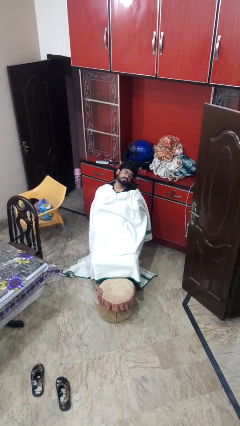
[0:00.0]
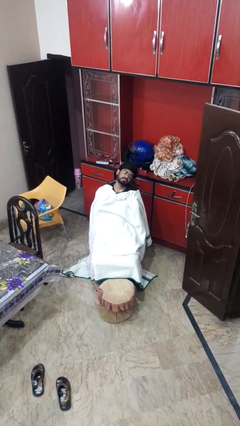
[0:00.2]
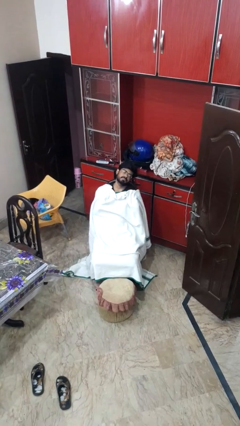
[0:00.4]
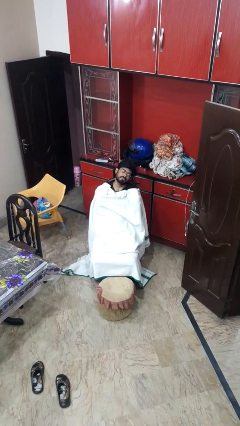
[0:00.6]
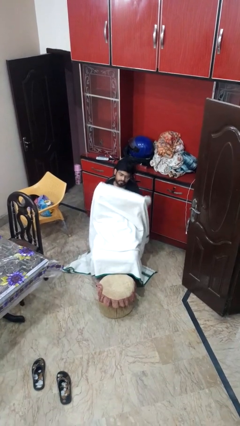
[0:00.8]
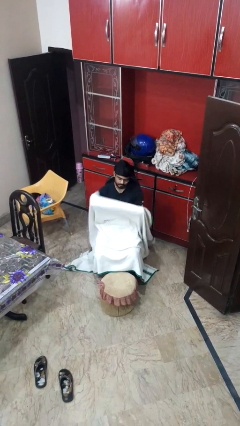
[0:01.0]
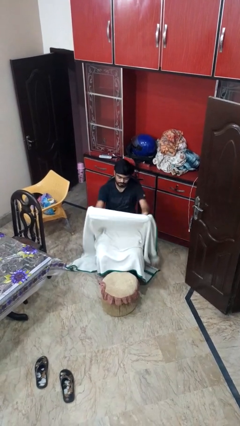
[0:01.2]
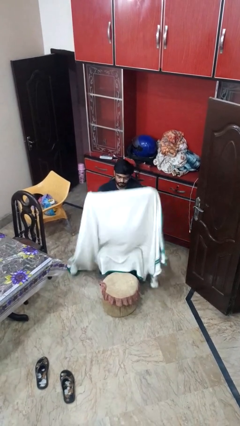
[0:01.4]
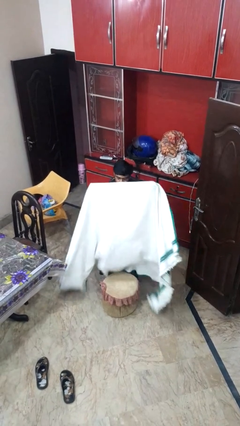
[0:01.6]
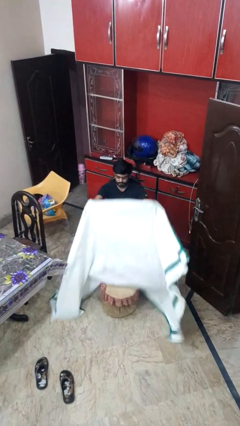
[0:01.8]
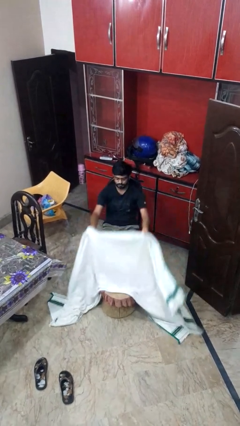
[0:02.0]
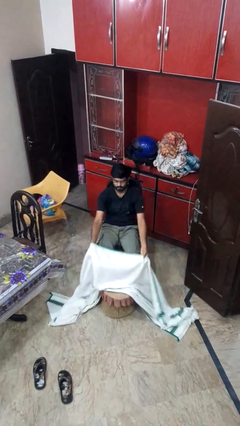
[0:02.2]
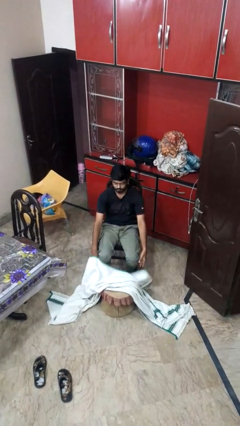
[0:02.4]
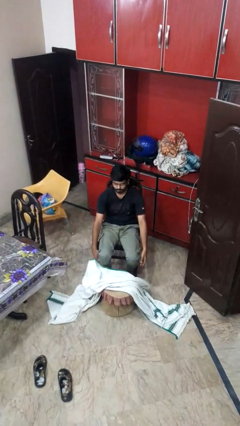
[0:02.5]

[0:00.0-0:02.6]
person uncovers with blanket

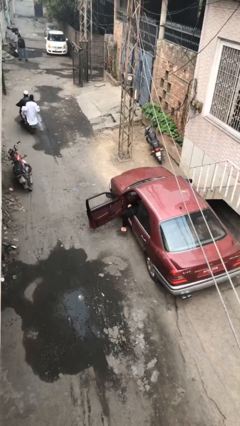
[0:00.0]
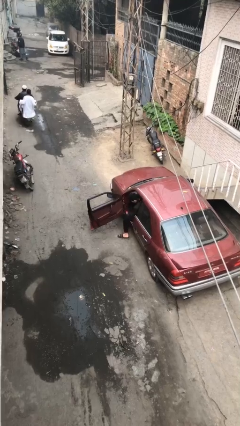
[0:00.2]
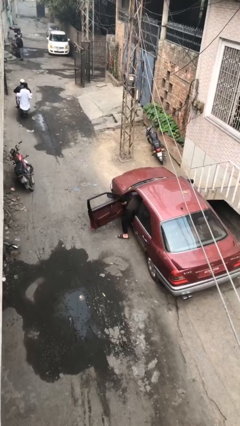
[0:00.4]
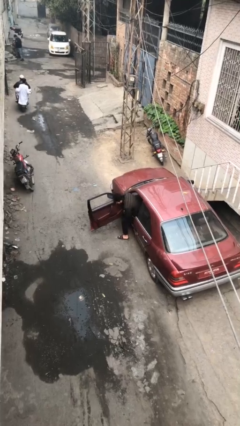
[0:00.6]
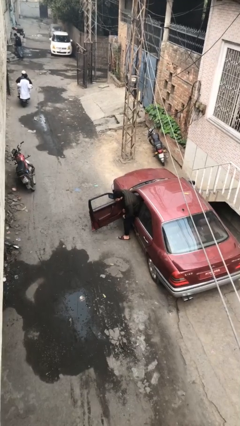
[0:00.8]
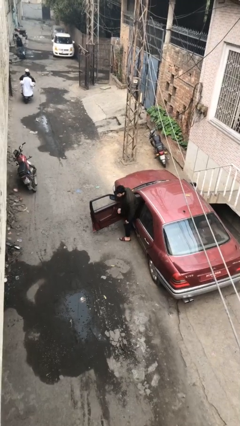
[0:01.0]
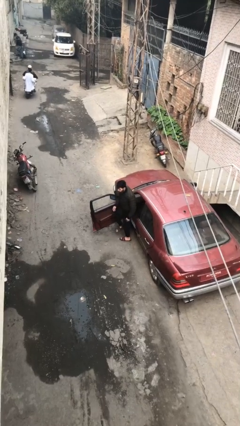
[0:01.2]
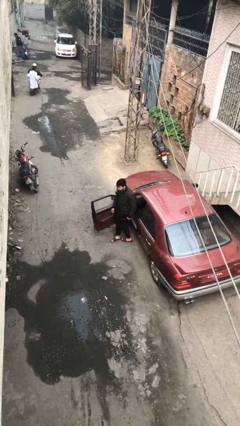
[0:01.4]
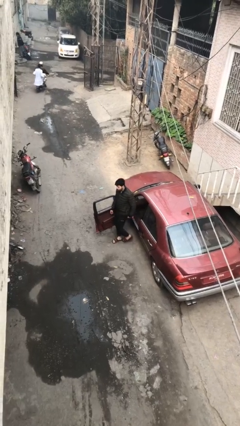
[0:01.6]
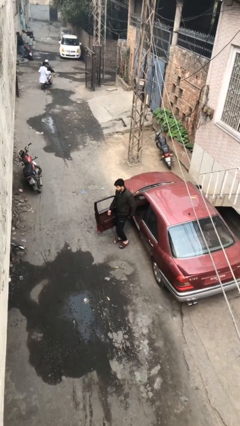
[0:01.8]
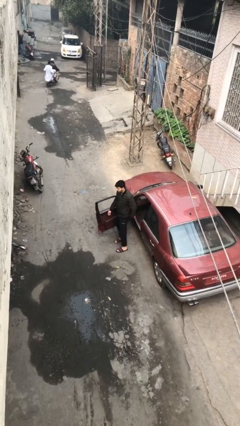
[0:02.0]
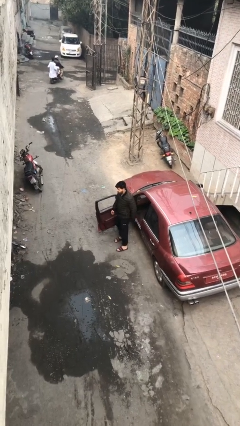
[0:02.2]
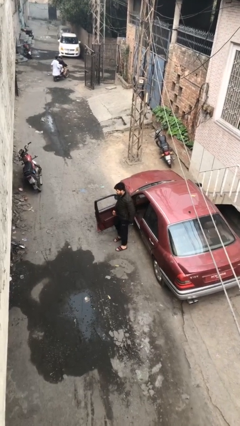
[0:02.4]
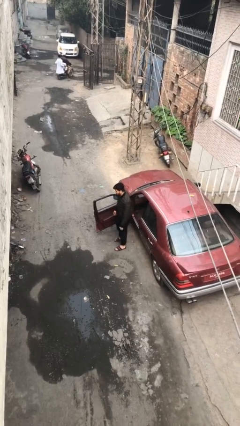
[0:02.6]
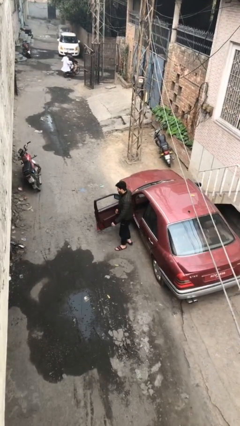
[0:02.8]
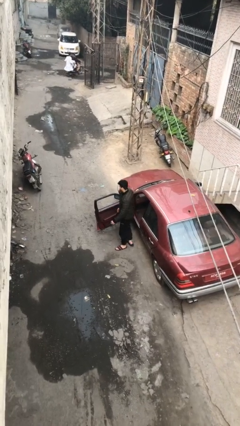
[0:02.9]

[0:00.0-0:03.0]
person exits car

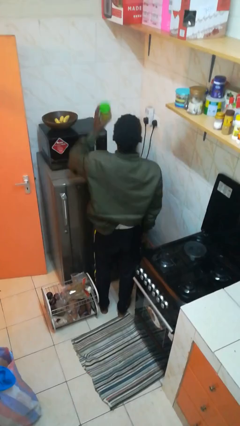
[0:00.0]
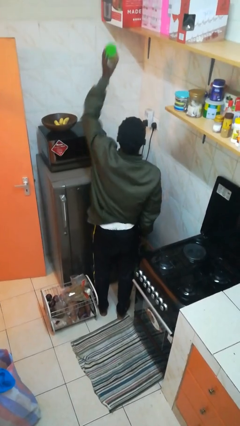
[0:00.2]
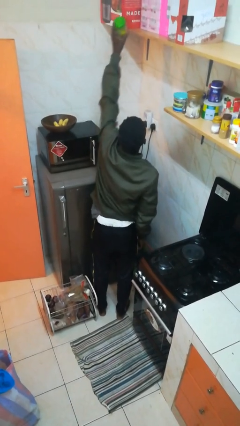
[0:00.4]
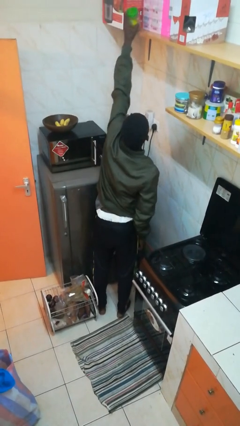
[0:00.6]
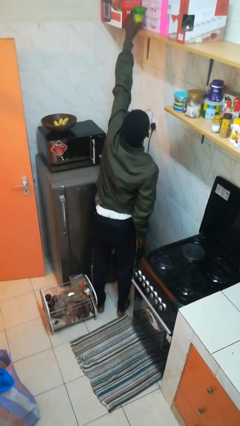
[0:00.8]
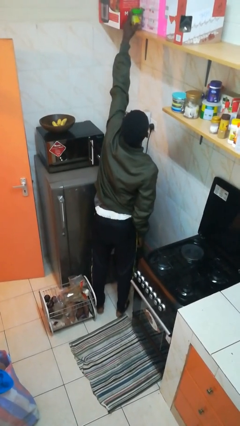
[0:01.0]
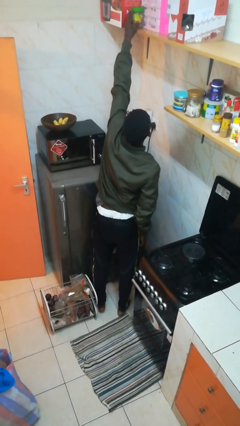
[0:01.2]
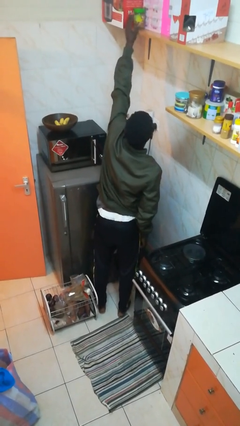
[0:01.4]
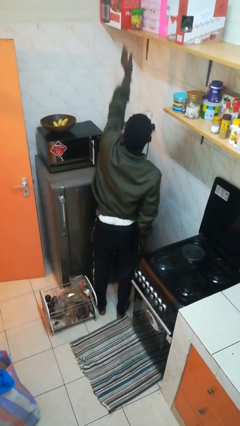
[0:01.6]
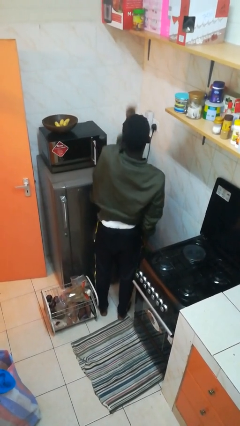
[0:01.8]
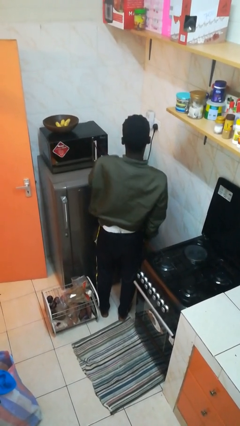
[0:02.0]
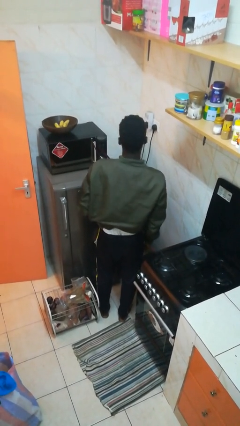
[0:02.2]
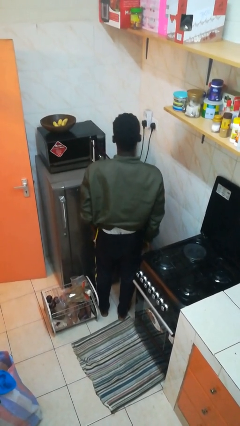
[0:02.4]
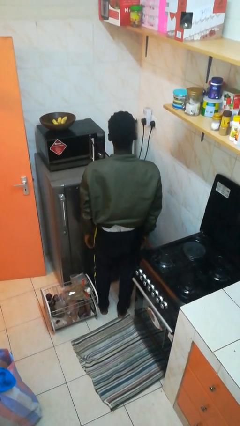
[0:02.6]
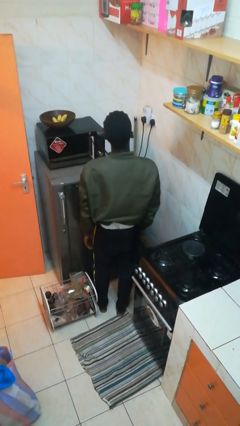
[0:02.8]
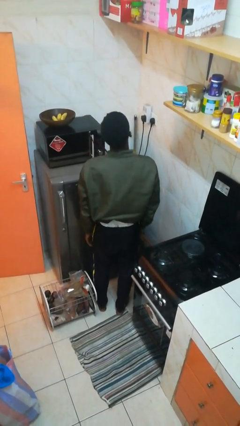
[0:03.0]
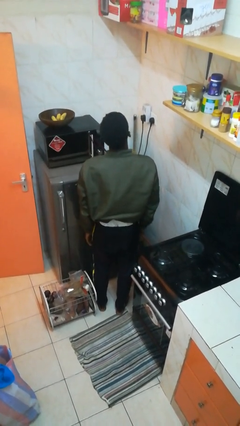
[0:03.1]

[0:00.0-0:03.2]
person puts down object on shelf

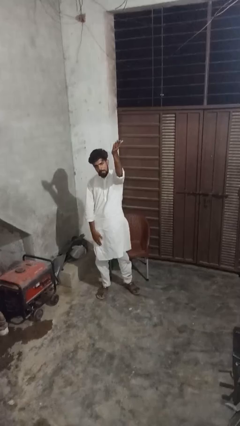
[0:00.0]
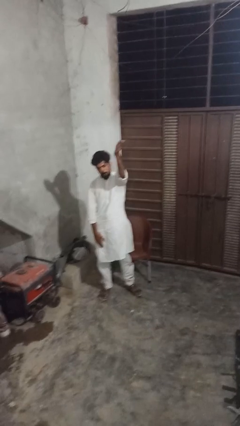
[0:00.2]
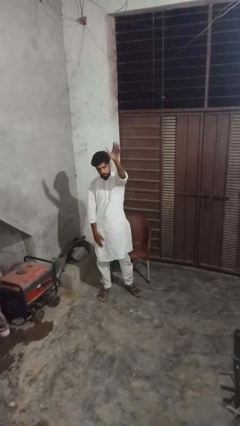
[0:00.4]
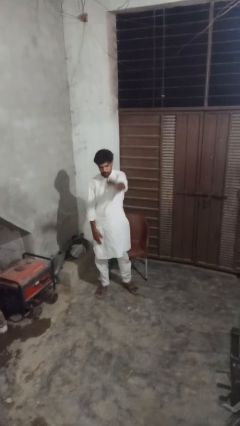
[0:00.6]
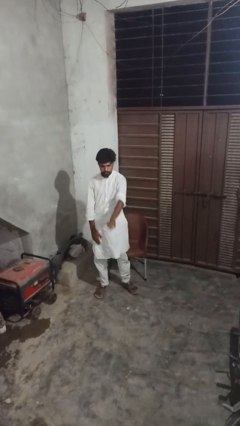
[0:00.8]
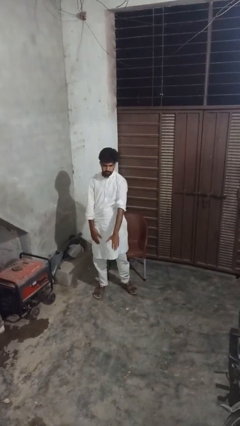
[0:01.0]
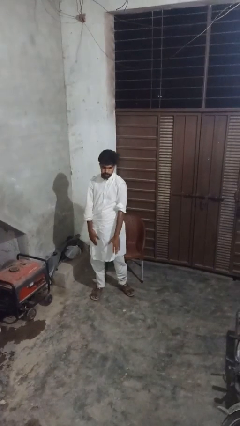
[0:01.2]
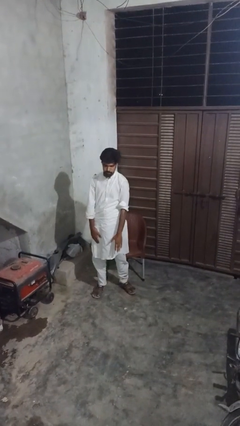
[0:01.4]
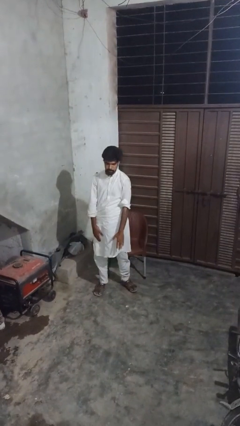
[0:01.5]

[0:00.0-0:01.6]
person gestures swipe down

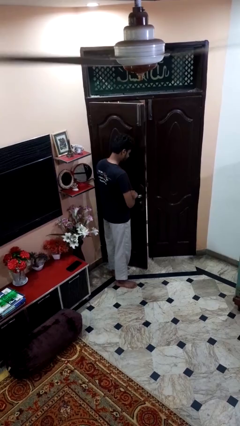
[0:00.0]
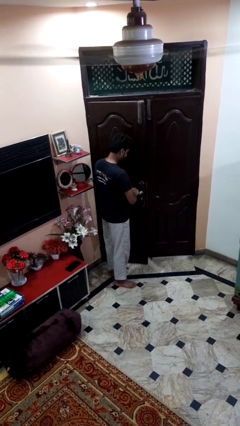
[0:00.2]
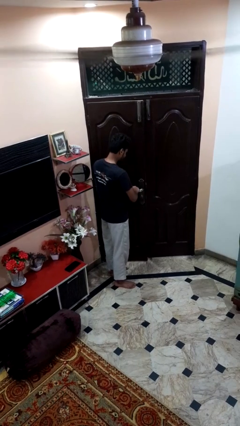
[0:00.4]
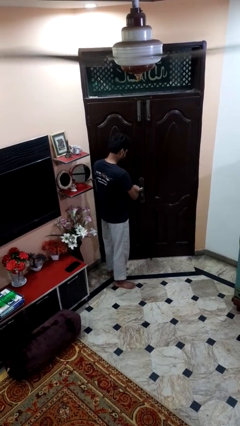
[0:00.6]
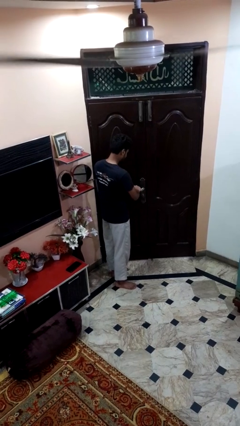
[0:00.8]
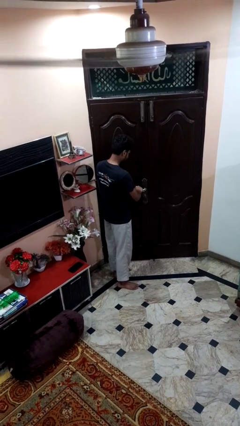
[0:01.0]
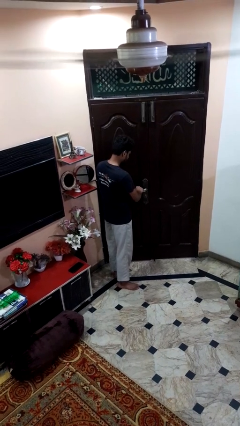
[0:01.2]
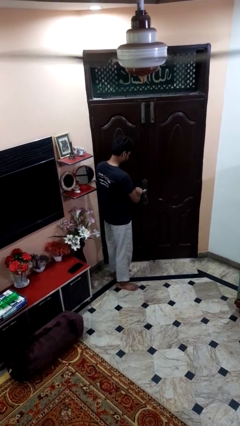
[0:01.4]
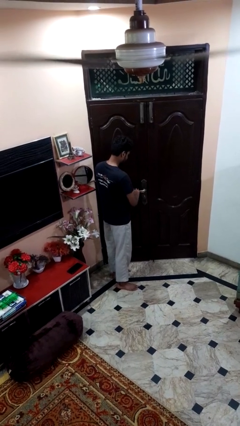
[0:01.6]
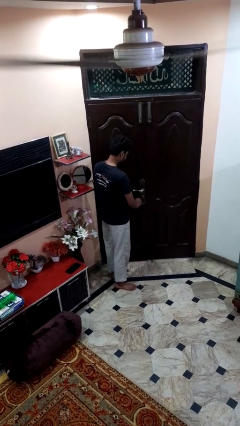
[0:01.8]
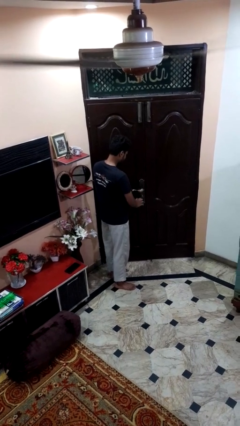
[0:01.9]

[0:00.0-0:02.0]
person closes facility door

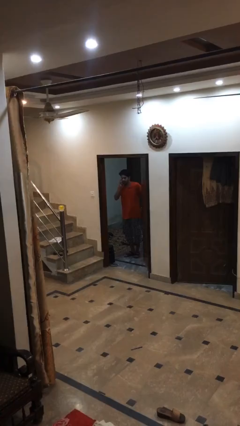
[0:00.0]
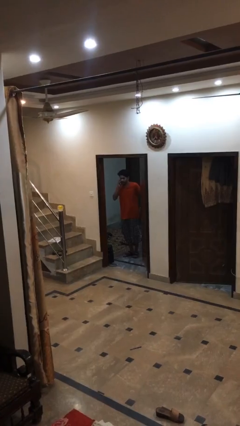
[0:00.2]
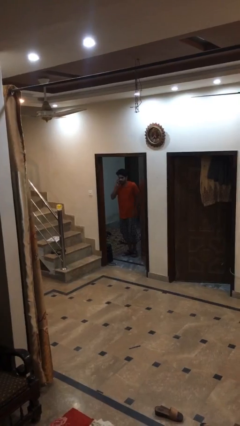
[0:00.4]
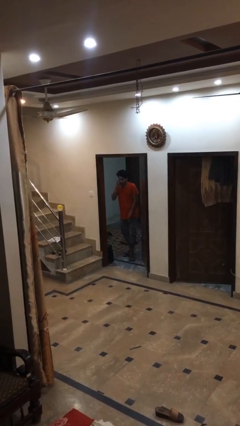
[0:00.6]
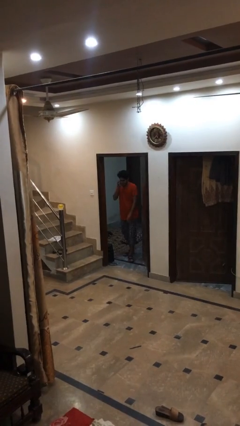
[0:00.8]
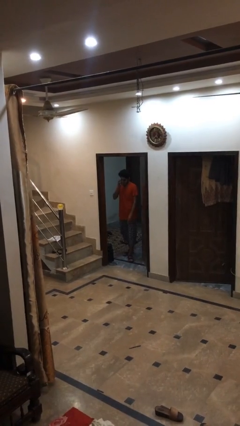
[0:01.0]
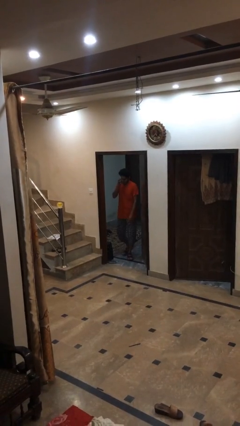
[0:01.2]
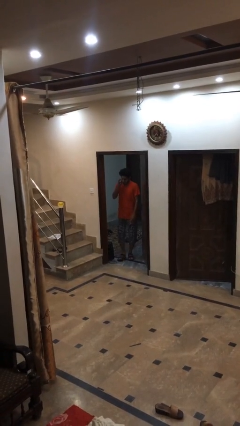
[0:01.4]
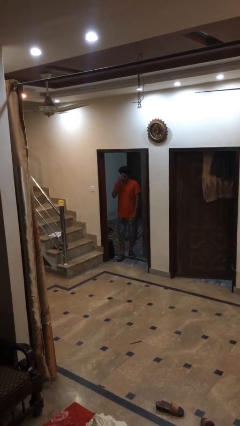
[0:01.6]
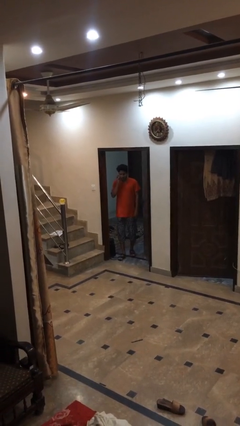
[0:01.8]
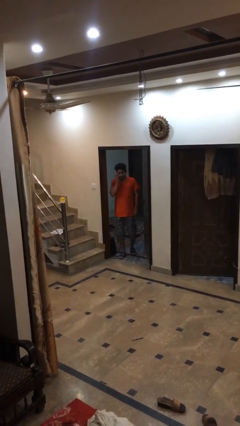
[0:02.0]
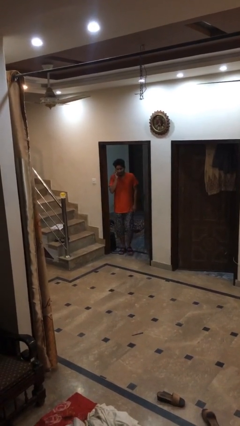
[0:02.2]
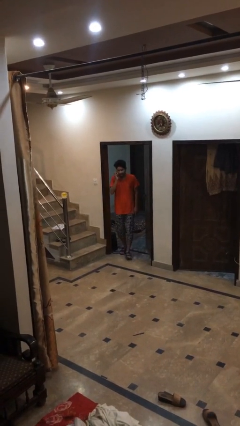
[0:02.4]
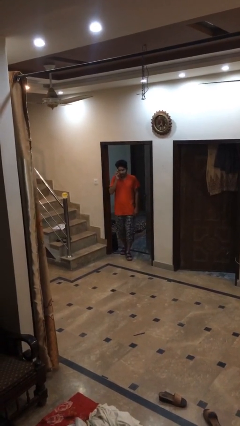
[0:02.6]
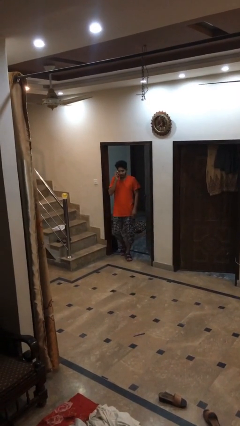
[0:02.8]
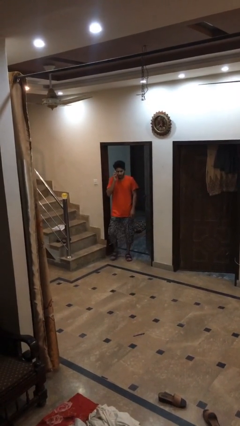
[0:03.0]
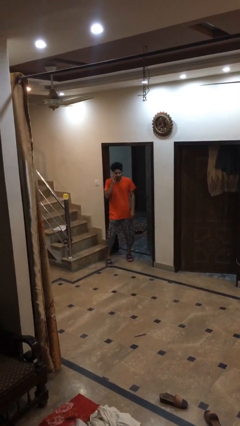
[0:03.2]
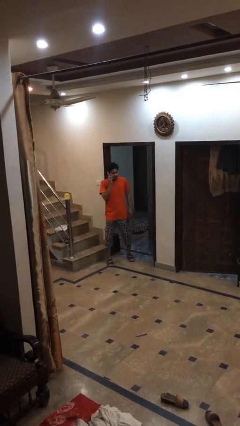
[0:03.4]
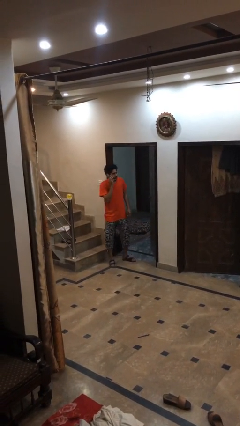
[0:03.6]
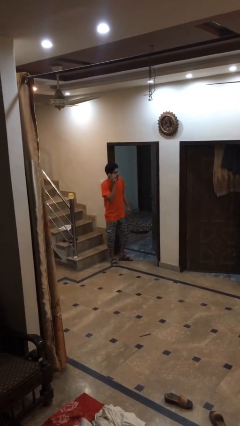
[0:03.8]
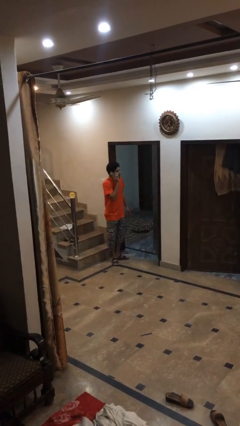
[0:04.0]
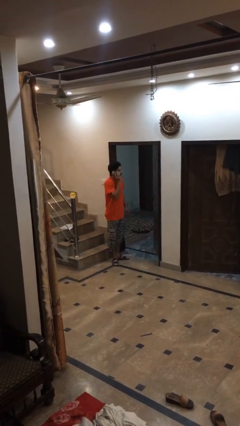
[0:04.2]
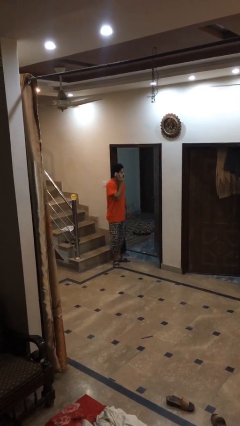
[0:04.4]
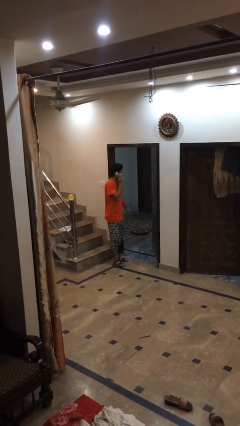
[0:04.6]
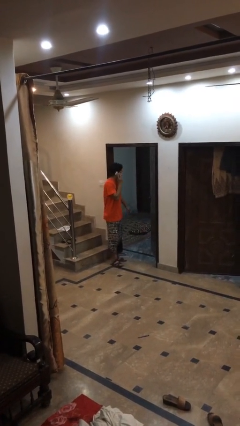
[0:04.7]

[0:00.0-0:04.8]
person enters scene through structure
